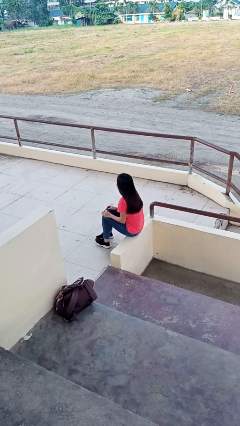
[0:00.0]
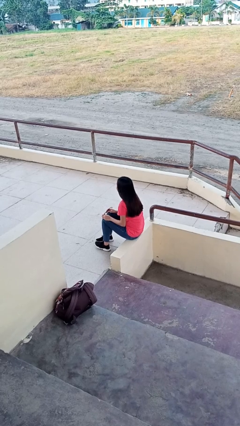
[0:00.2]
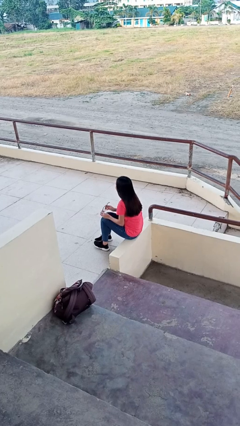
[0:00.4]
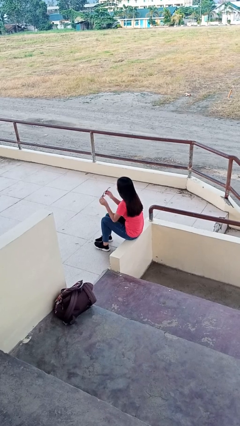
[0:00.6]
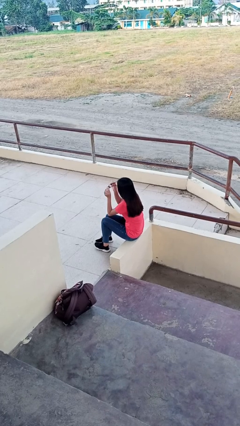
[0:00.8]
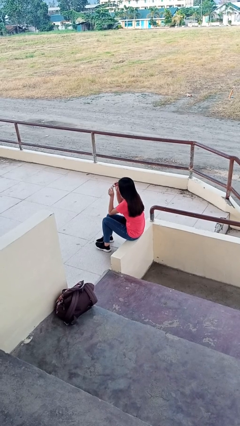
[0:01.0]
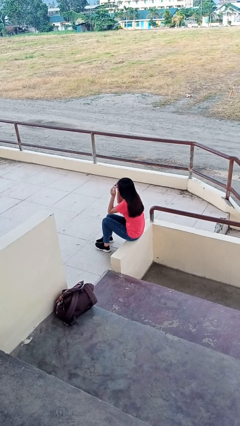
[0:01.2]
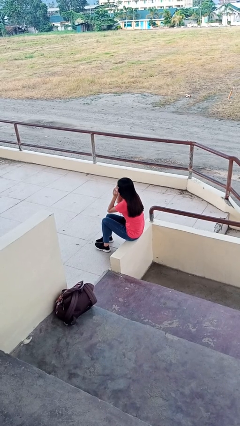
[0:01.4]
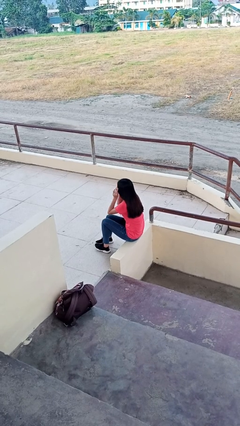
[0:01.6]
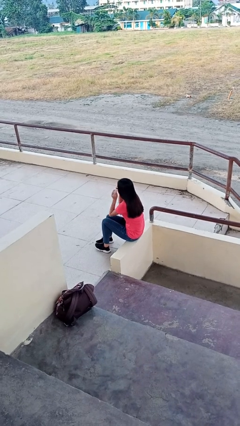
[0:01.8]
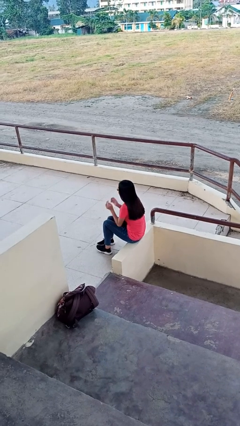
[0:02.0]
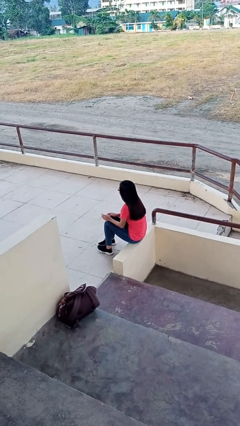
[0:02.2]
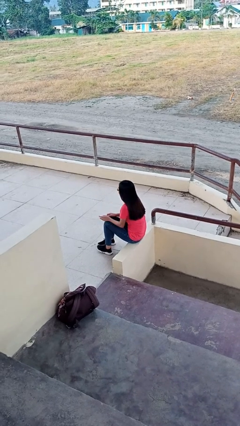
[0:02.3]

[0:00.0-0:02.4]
person puts on glasses

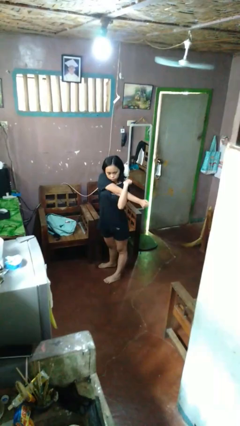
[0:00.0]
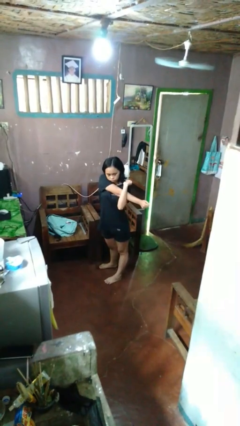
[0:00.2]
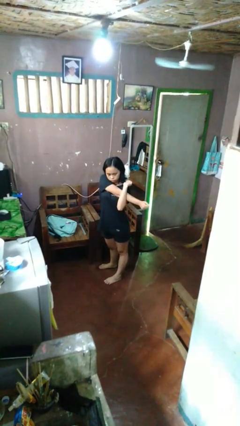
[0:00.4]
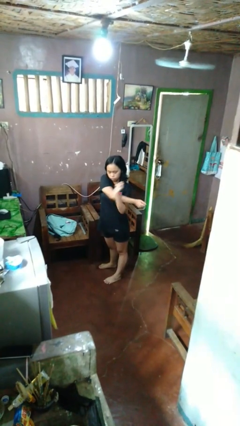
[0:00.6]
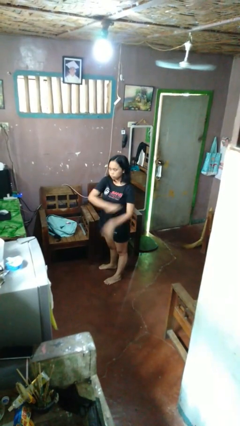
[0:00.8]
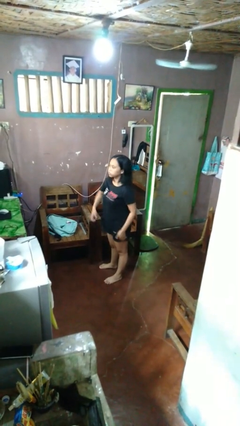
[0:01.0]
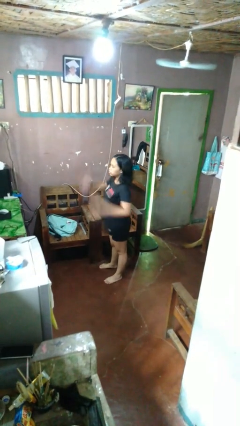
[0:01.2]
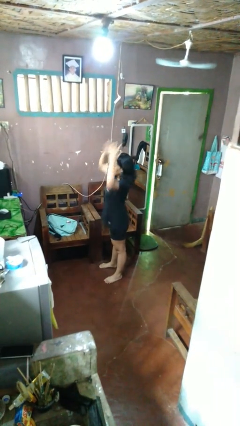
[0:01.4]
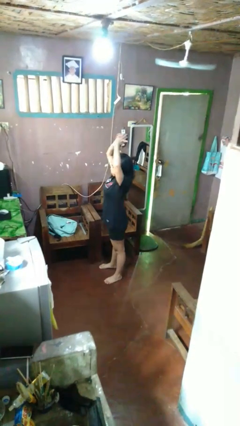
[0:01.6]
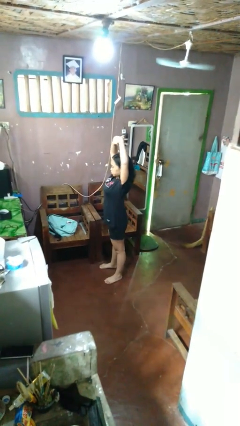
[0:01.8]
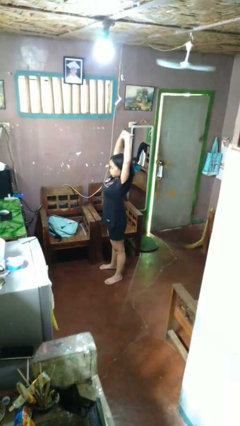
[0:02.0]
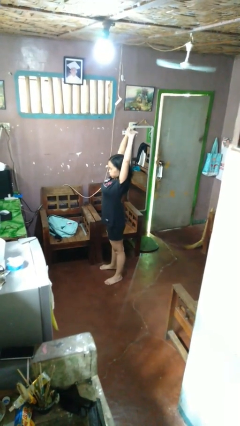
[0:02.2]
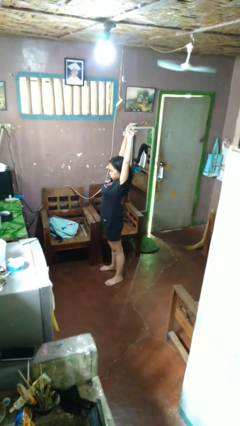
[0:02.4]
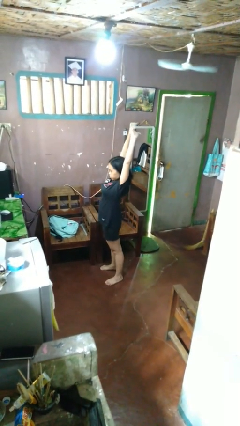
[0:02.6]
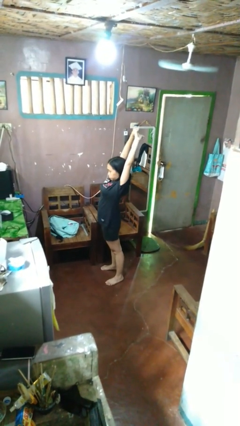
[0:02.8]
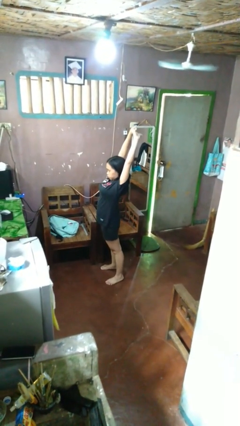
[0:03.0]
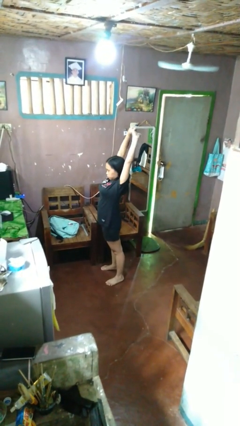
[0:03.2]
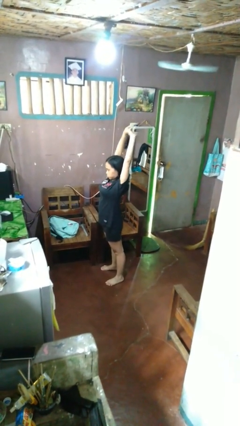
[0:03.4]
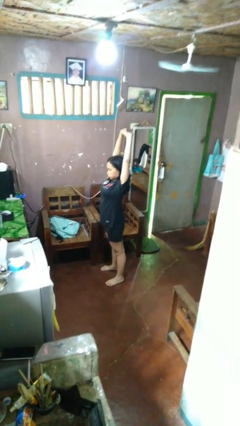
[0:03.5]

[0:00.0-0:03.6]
person stretches arms over head

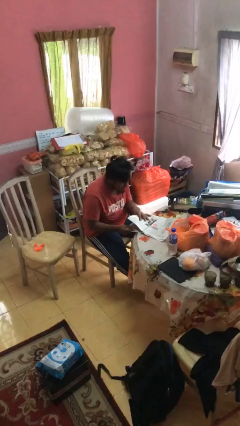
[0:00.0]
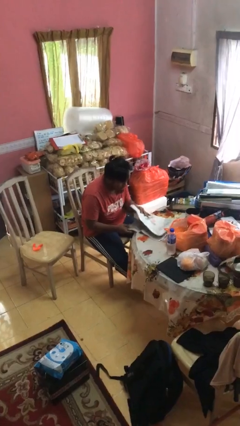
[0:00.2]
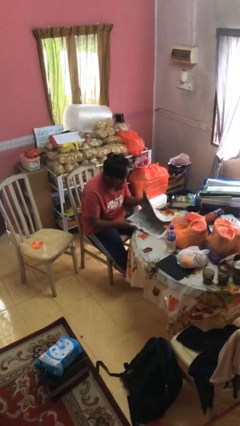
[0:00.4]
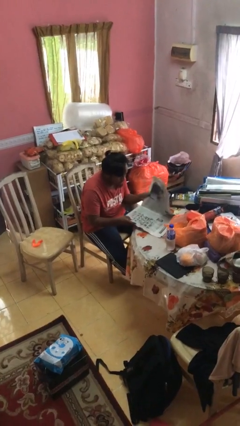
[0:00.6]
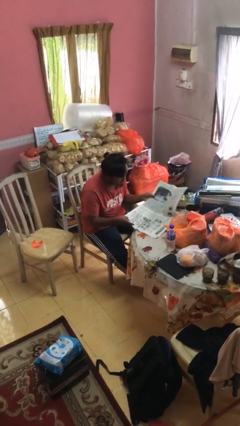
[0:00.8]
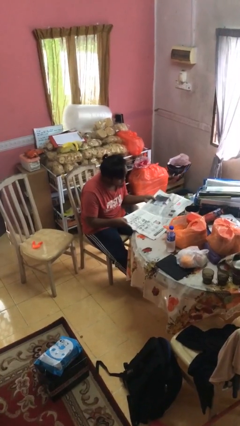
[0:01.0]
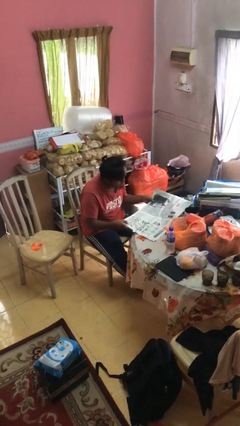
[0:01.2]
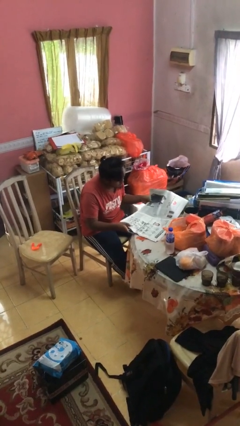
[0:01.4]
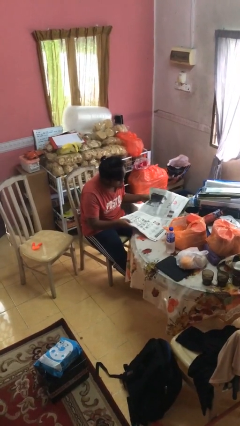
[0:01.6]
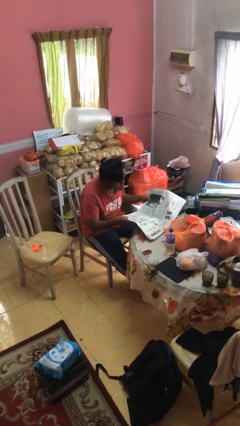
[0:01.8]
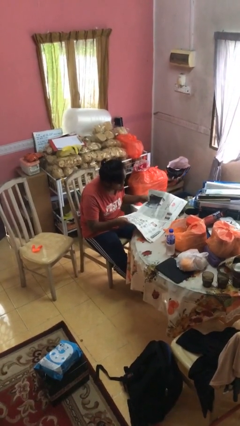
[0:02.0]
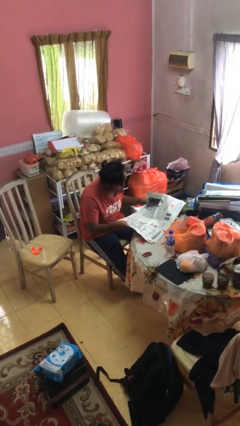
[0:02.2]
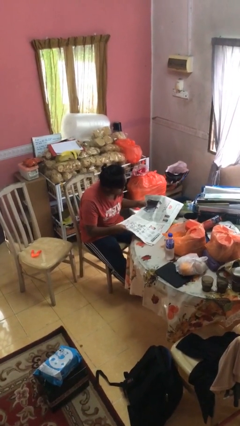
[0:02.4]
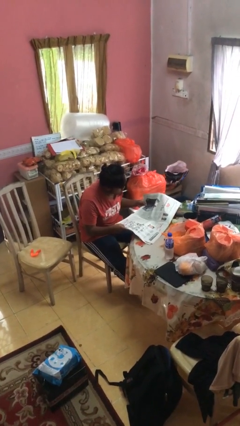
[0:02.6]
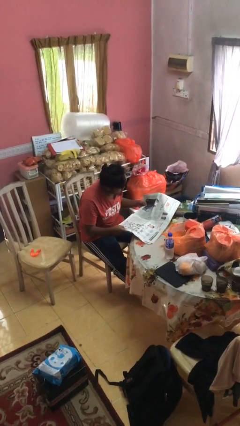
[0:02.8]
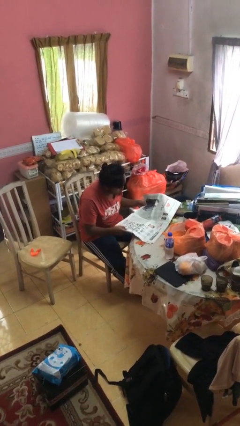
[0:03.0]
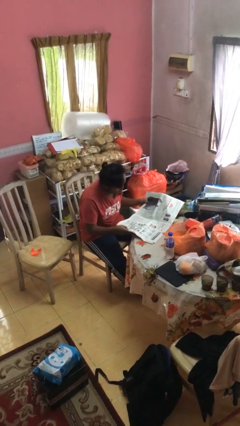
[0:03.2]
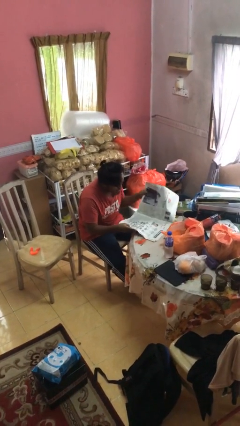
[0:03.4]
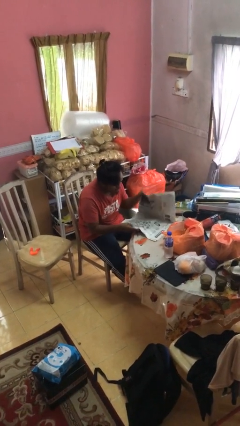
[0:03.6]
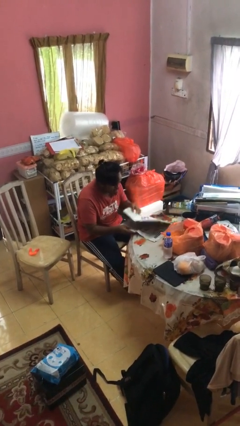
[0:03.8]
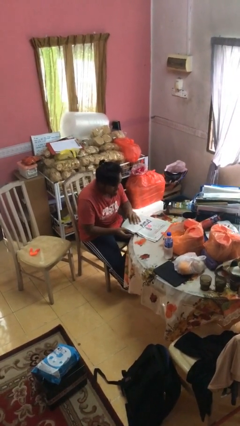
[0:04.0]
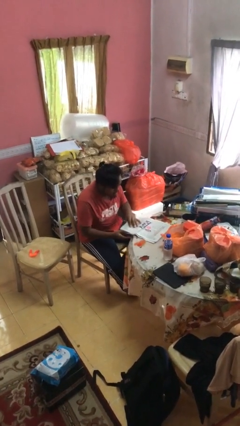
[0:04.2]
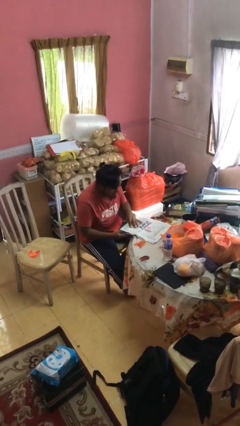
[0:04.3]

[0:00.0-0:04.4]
person reads newspaper

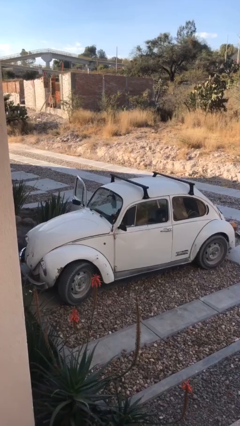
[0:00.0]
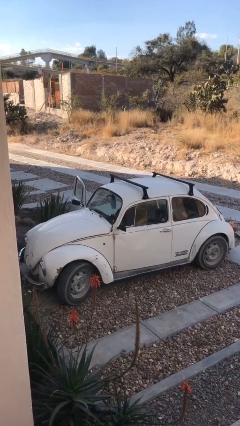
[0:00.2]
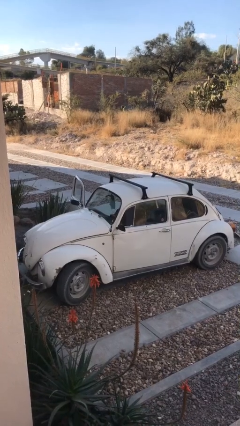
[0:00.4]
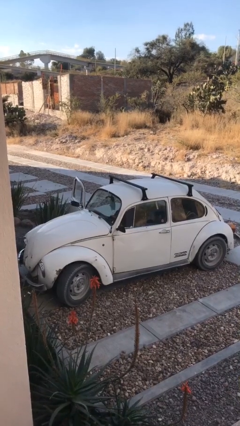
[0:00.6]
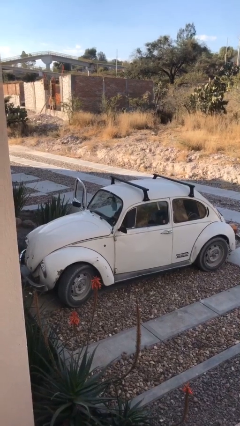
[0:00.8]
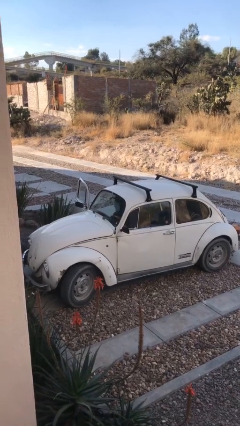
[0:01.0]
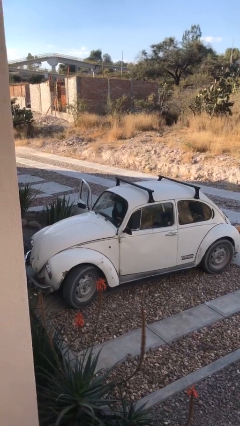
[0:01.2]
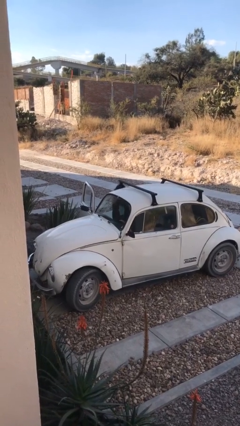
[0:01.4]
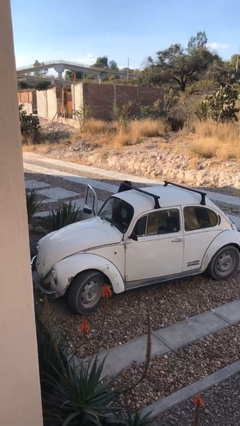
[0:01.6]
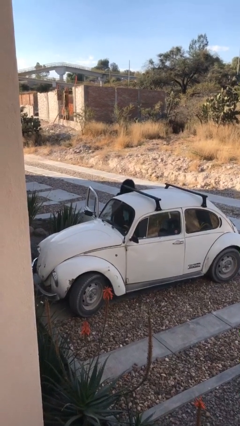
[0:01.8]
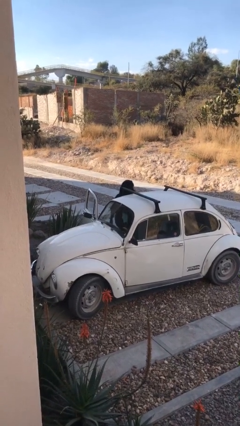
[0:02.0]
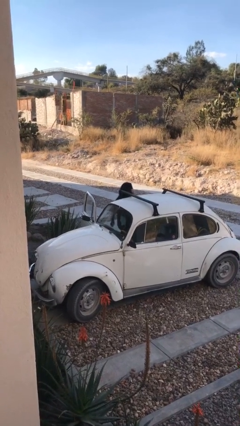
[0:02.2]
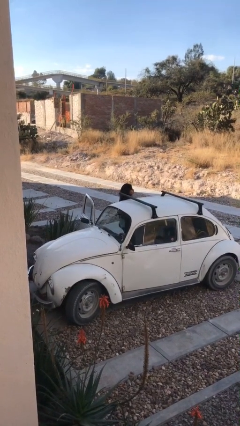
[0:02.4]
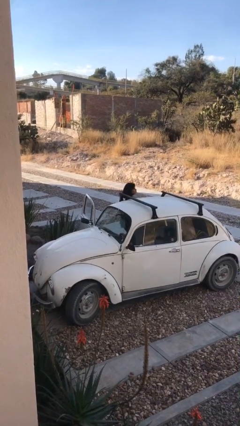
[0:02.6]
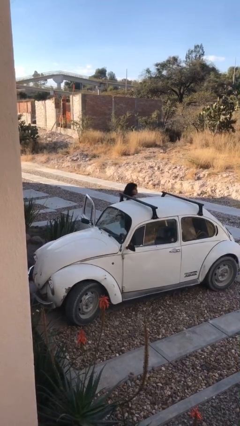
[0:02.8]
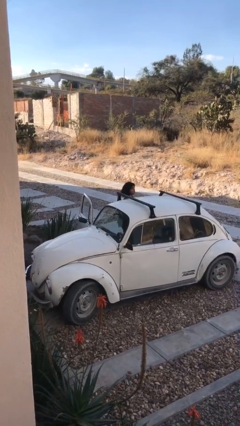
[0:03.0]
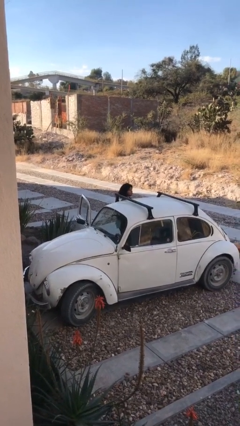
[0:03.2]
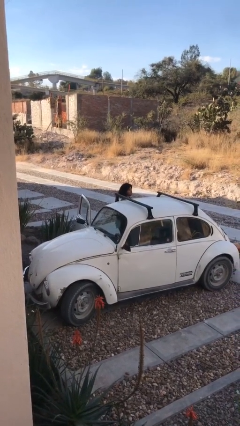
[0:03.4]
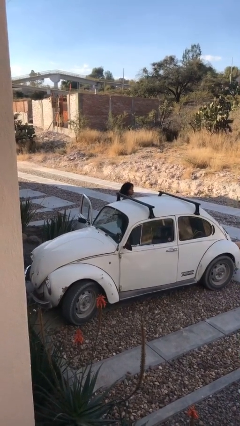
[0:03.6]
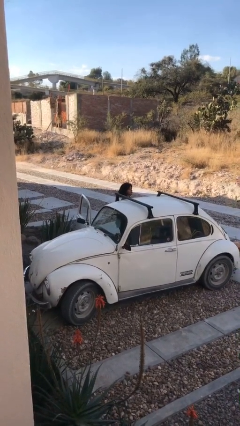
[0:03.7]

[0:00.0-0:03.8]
person exits car

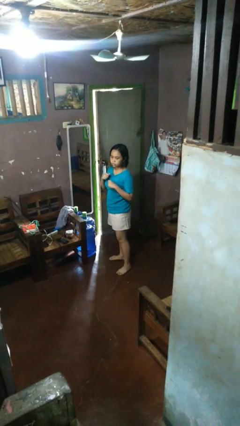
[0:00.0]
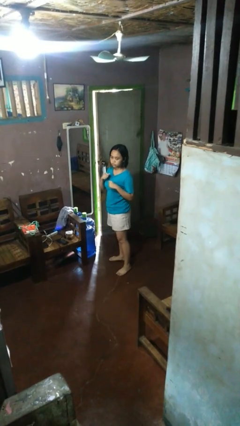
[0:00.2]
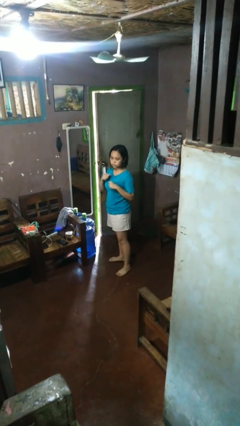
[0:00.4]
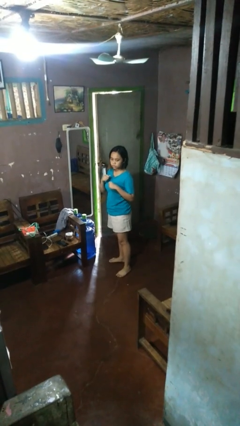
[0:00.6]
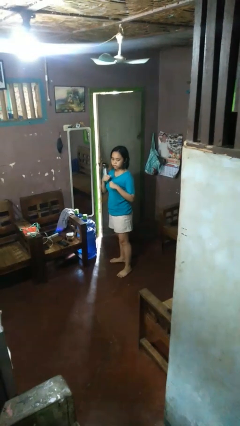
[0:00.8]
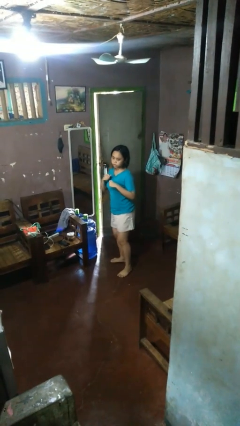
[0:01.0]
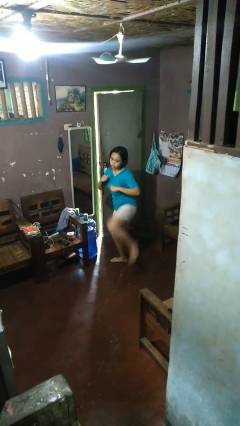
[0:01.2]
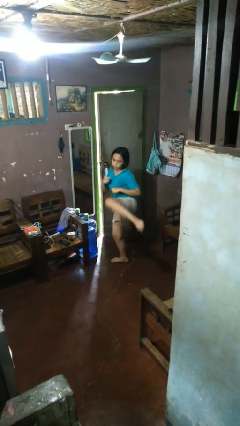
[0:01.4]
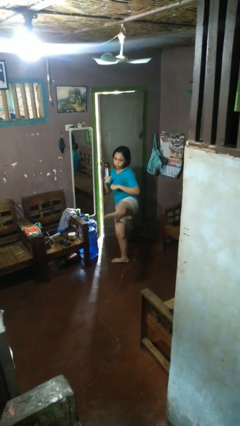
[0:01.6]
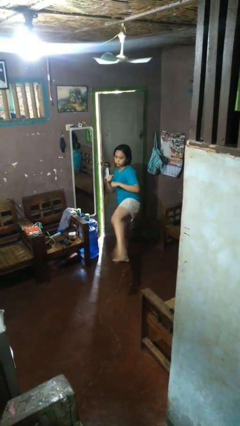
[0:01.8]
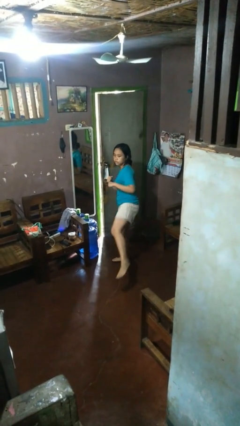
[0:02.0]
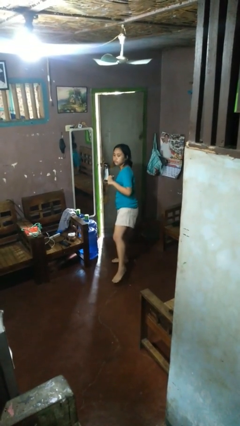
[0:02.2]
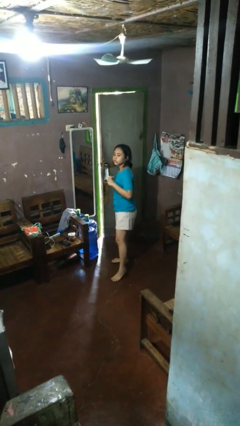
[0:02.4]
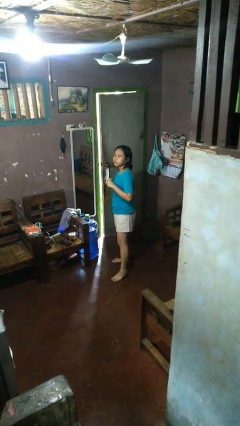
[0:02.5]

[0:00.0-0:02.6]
person karate kicks

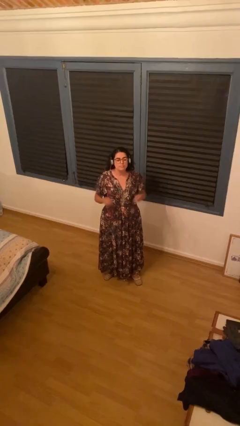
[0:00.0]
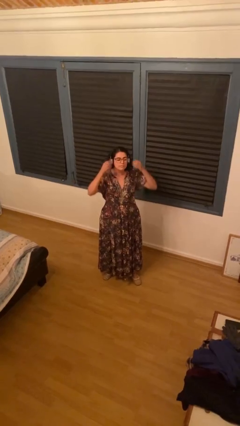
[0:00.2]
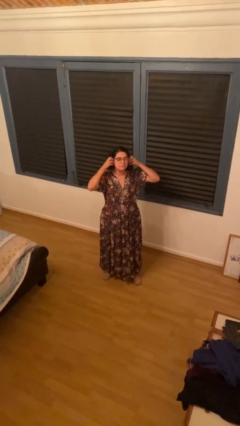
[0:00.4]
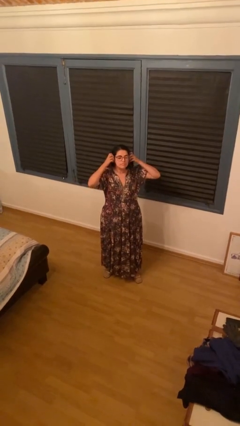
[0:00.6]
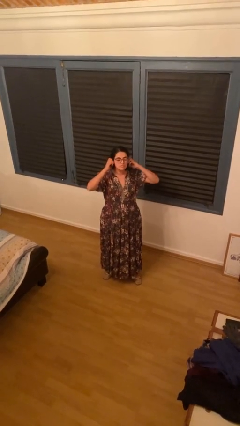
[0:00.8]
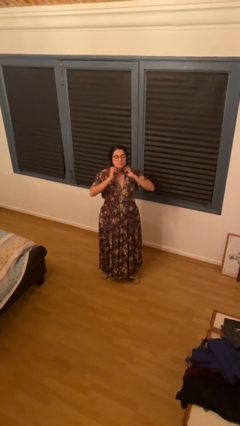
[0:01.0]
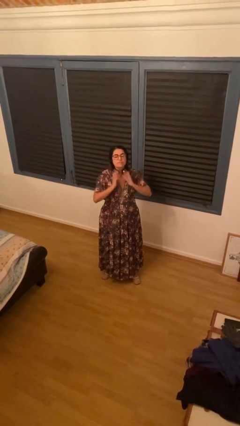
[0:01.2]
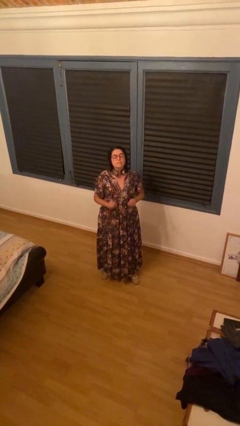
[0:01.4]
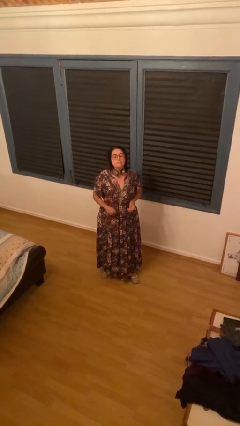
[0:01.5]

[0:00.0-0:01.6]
person takes off headphones
